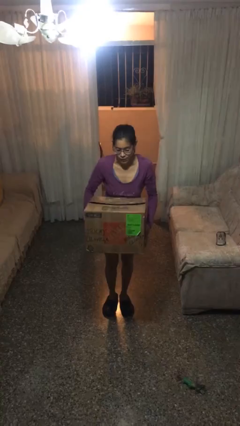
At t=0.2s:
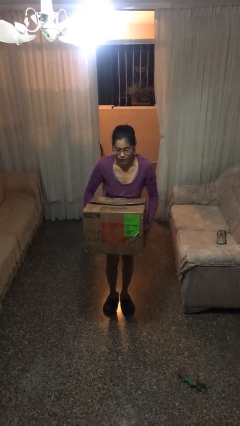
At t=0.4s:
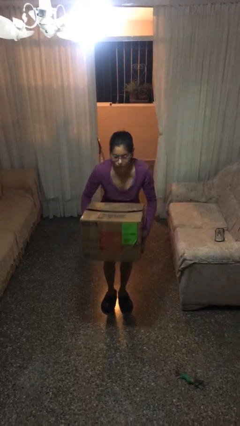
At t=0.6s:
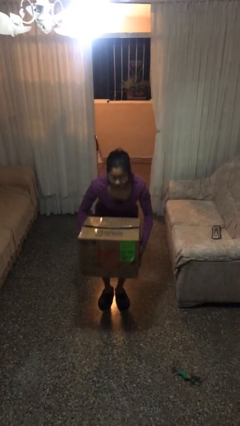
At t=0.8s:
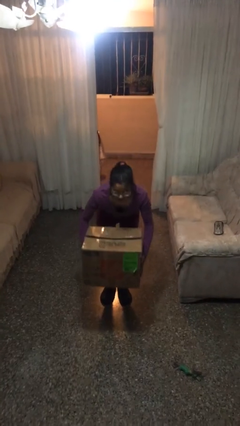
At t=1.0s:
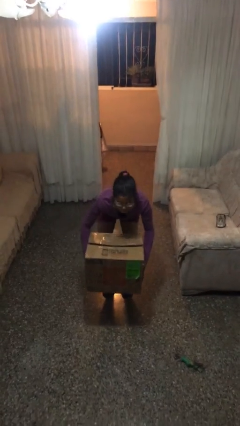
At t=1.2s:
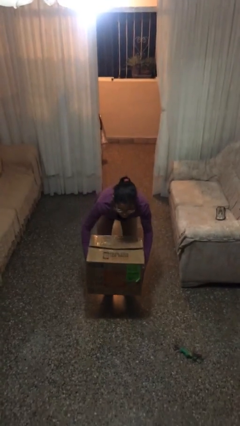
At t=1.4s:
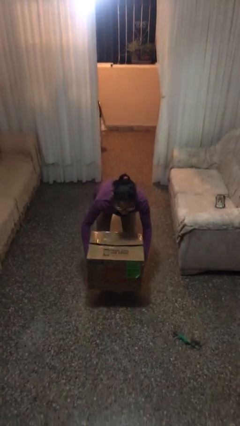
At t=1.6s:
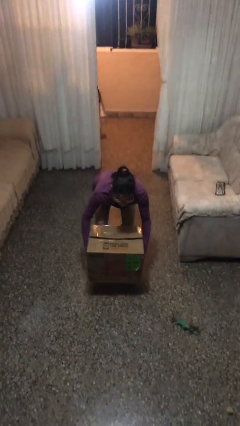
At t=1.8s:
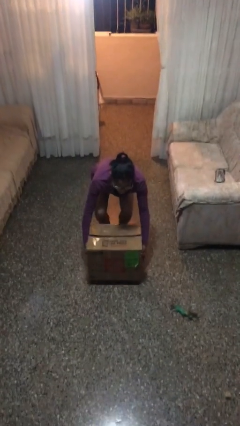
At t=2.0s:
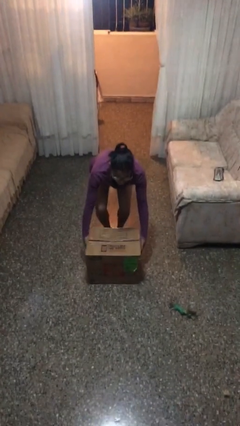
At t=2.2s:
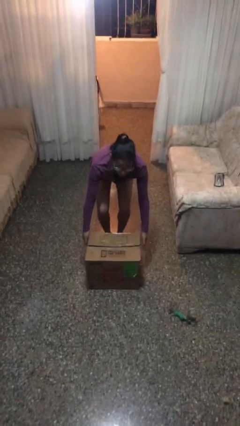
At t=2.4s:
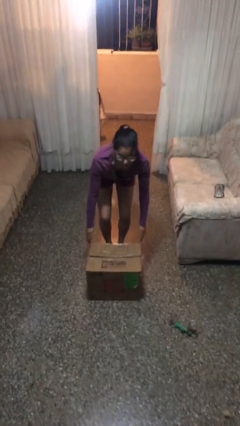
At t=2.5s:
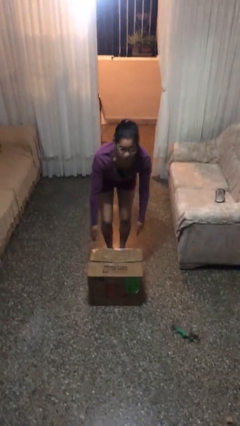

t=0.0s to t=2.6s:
person puts down object on floor

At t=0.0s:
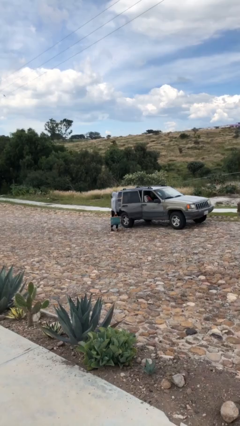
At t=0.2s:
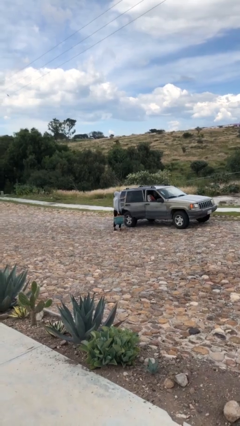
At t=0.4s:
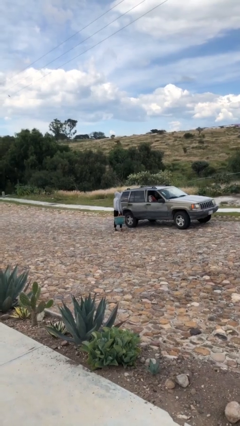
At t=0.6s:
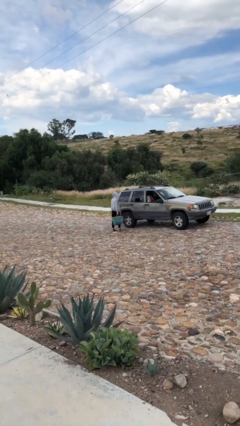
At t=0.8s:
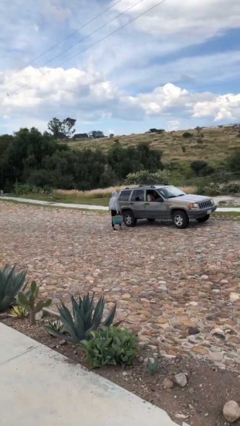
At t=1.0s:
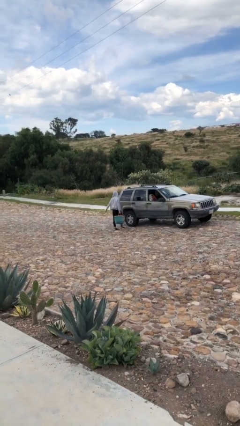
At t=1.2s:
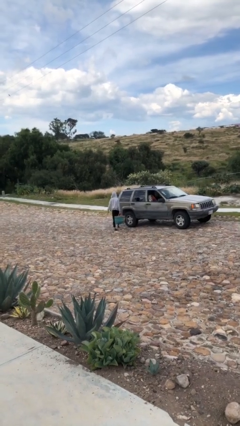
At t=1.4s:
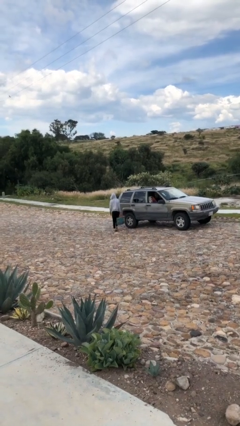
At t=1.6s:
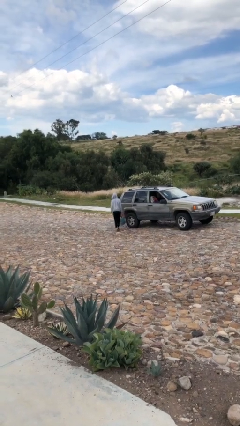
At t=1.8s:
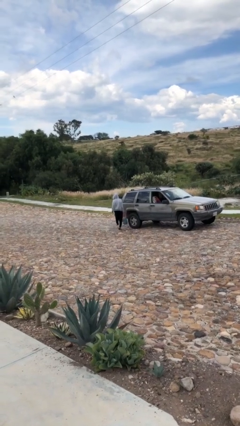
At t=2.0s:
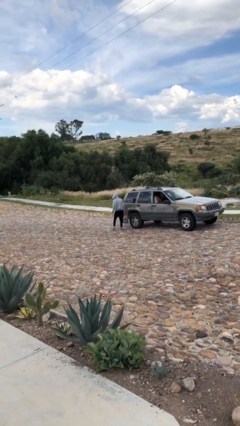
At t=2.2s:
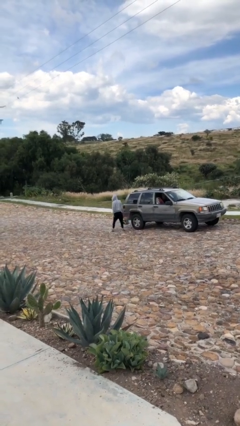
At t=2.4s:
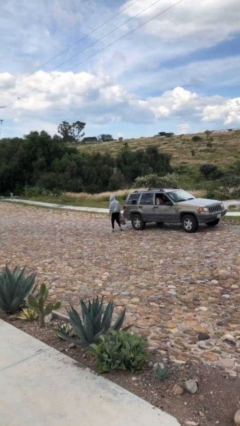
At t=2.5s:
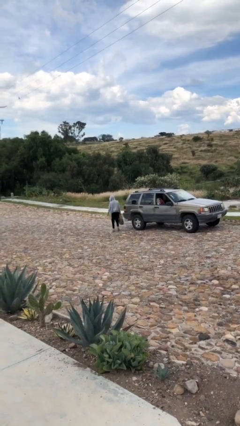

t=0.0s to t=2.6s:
person closes car door

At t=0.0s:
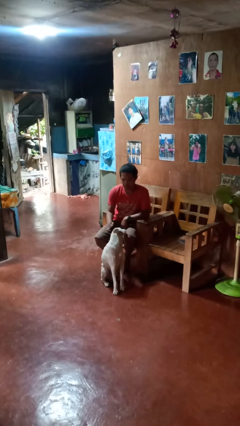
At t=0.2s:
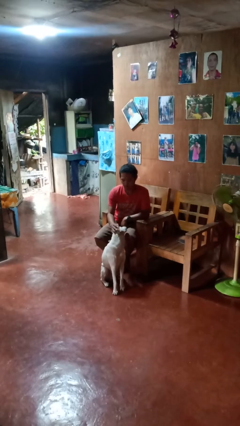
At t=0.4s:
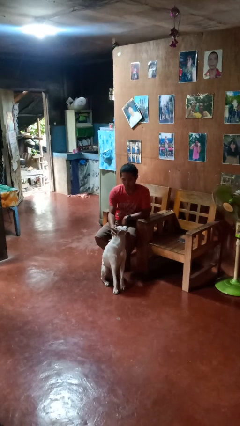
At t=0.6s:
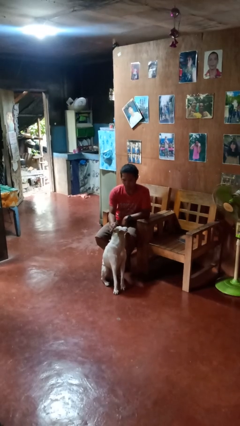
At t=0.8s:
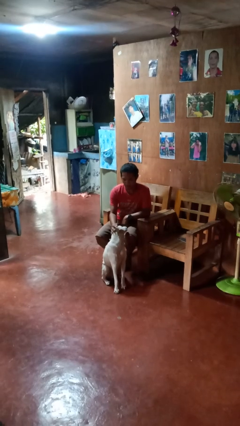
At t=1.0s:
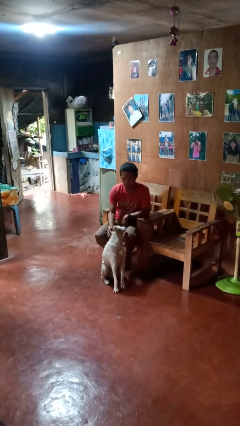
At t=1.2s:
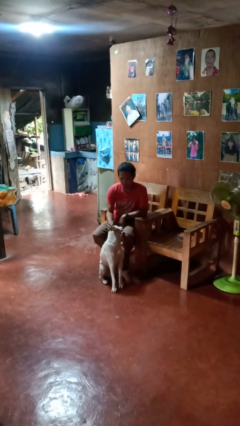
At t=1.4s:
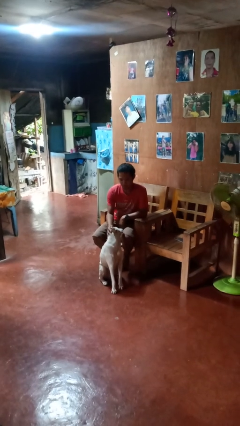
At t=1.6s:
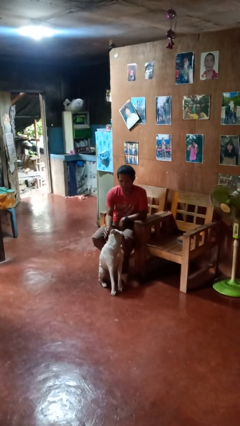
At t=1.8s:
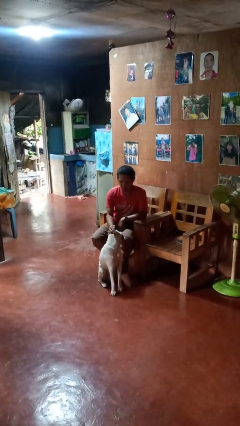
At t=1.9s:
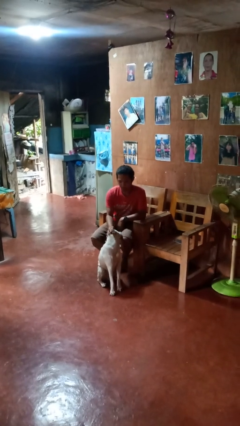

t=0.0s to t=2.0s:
person pets dog

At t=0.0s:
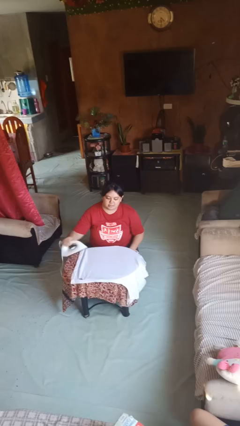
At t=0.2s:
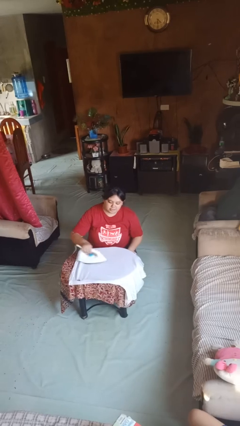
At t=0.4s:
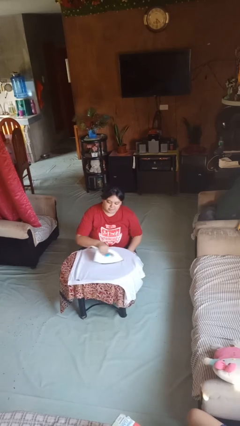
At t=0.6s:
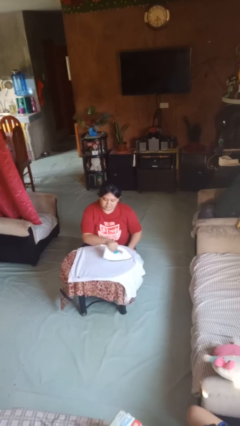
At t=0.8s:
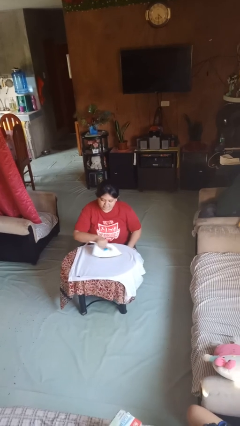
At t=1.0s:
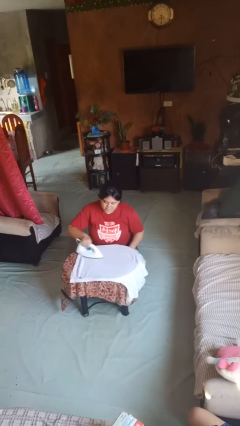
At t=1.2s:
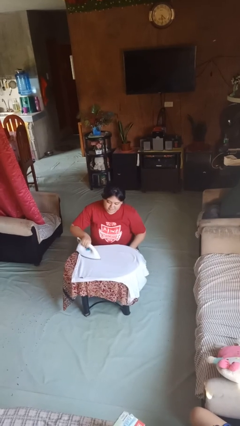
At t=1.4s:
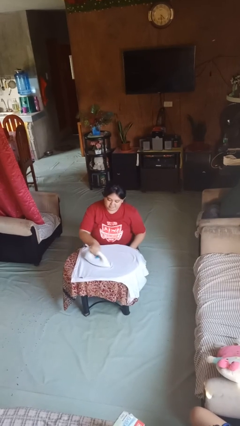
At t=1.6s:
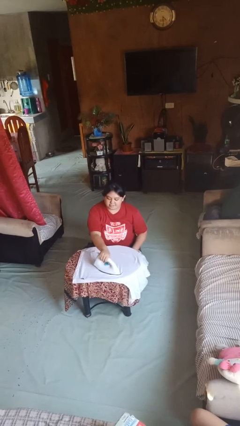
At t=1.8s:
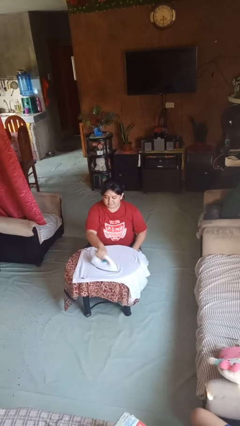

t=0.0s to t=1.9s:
person irons clothes

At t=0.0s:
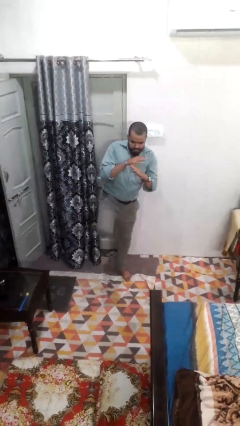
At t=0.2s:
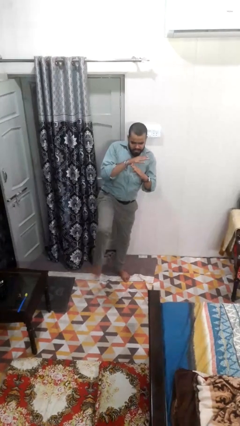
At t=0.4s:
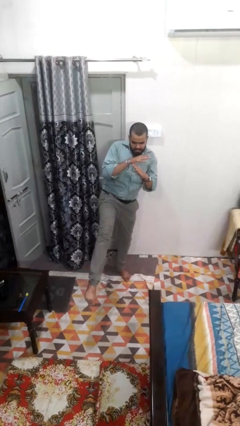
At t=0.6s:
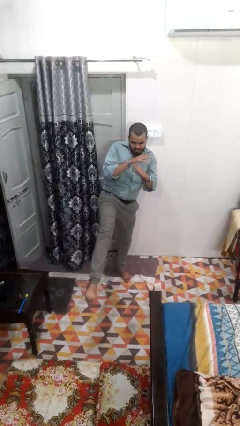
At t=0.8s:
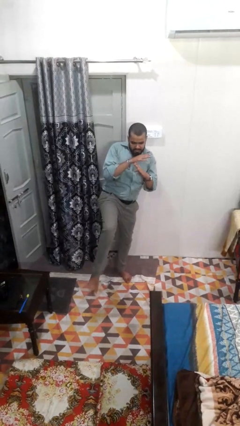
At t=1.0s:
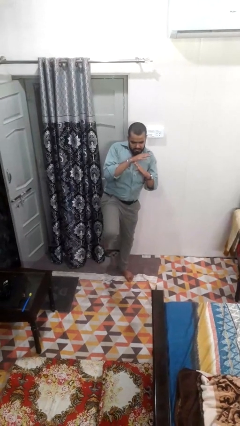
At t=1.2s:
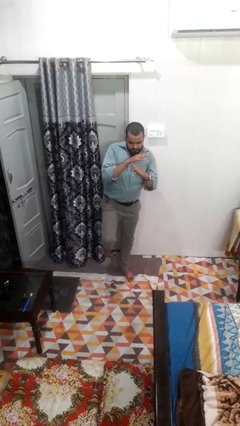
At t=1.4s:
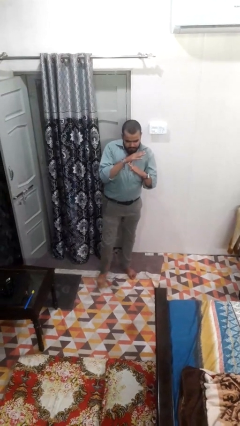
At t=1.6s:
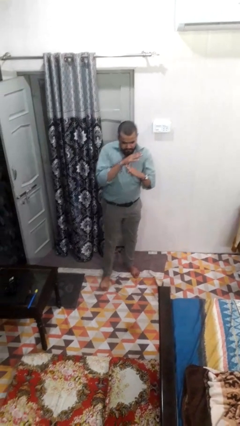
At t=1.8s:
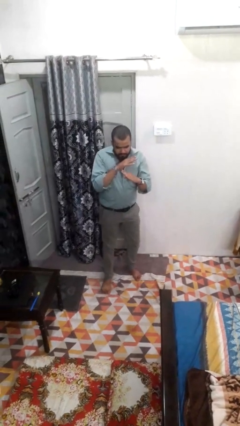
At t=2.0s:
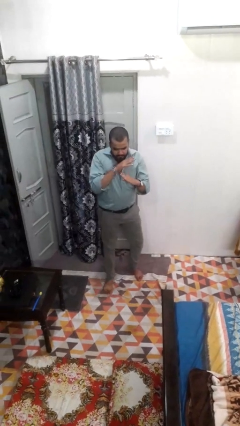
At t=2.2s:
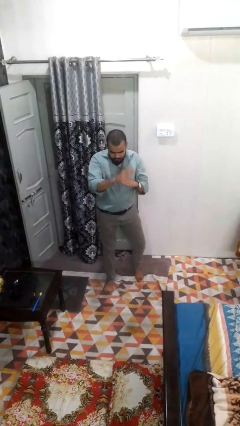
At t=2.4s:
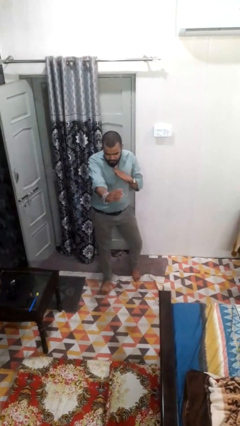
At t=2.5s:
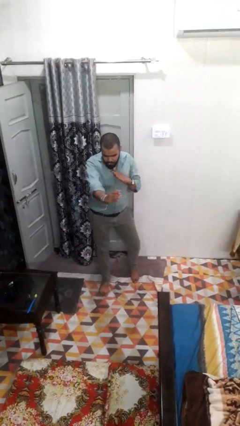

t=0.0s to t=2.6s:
person karate kicks

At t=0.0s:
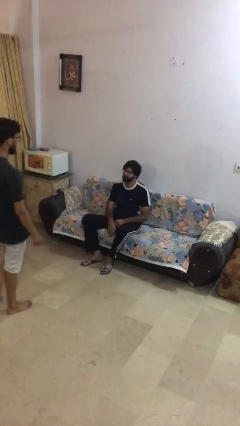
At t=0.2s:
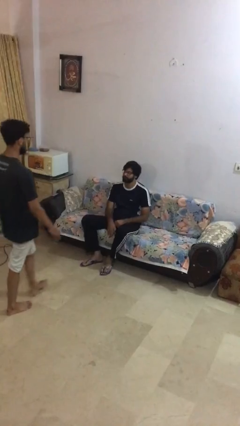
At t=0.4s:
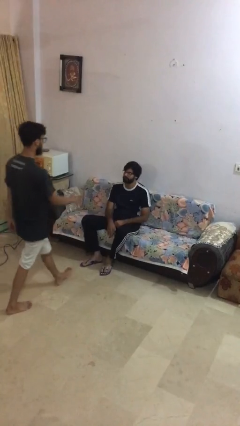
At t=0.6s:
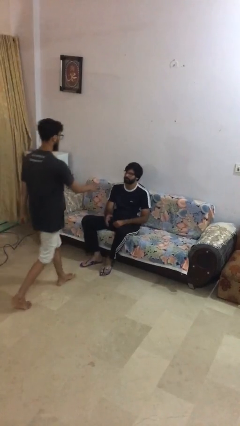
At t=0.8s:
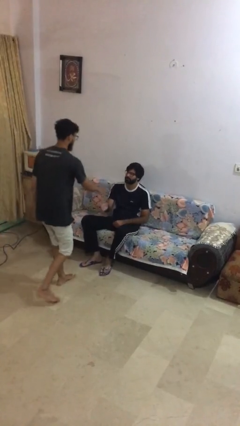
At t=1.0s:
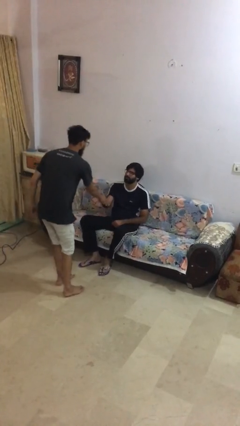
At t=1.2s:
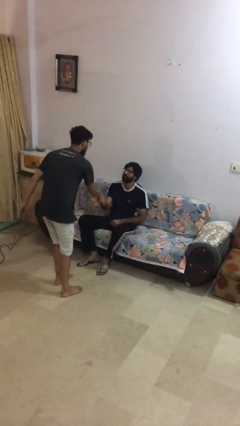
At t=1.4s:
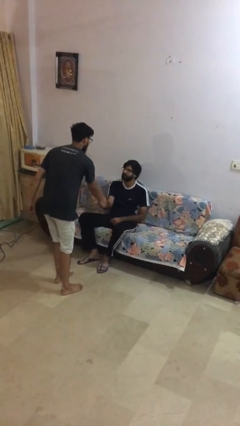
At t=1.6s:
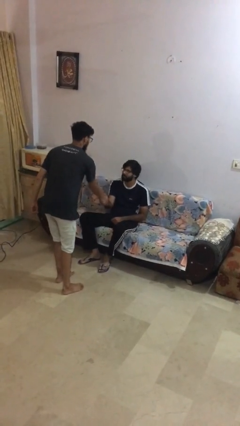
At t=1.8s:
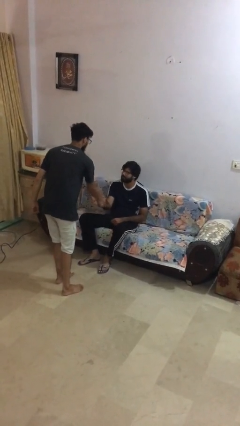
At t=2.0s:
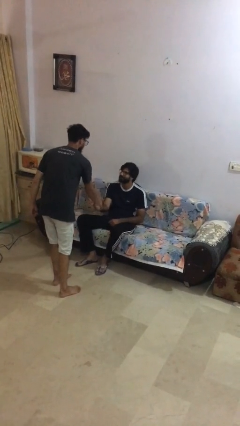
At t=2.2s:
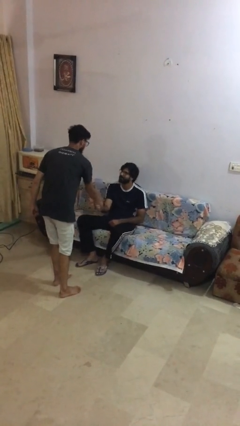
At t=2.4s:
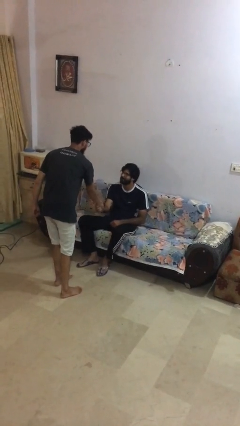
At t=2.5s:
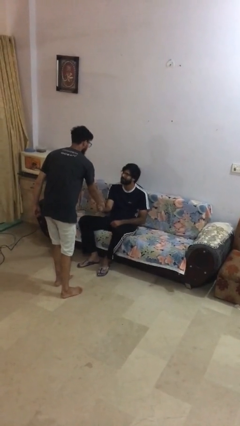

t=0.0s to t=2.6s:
person shakes hand

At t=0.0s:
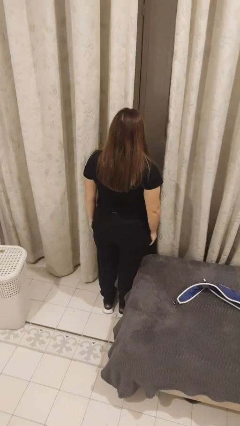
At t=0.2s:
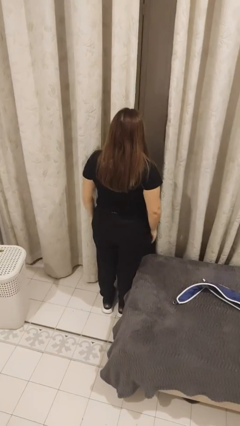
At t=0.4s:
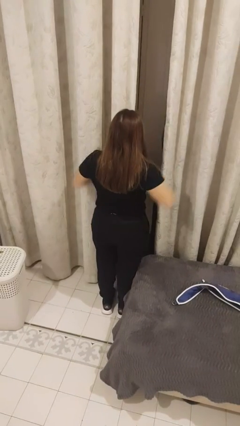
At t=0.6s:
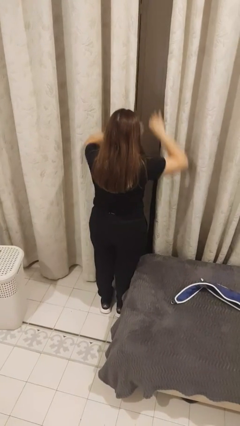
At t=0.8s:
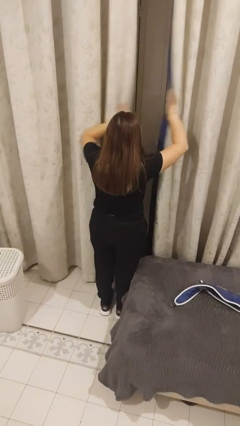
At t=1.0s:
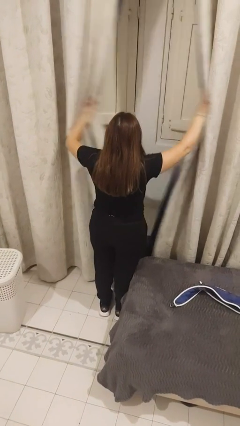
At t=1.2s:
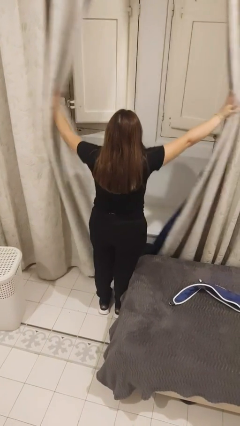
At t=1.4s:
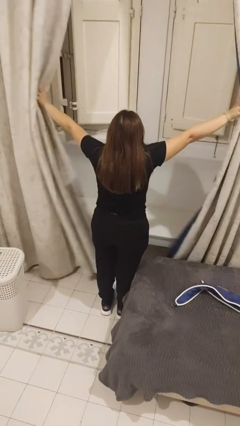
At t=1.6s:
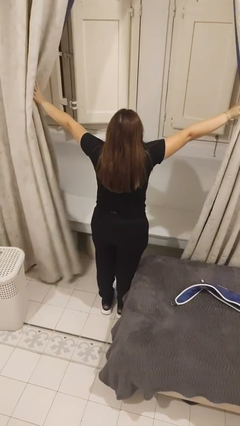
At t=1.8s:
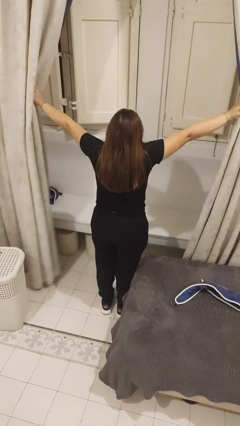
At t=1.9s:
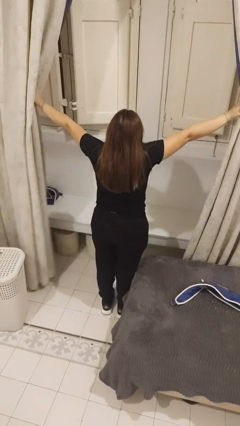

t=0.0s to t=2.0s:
person opens curtains

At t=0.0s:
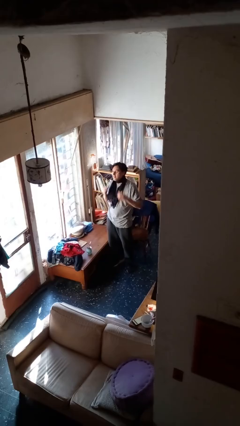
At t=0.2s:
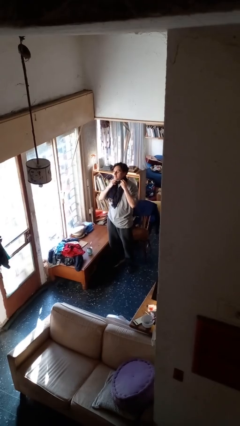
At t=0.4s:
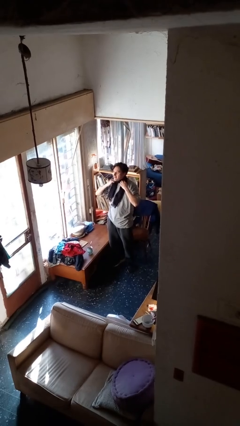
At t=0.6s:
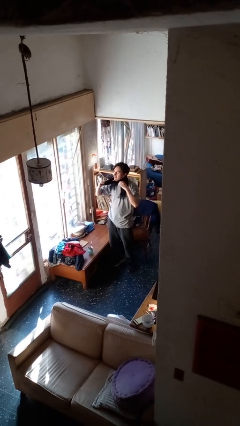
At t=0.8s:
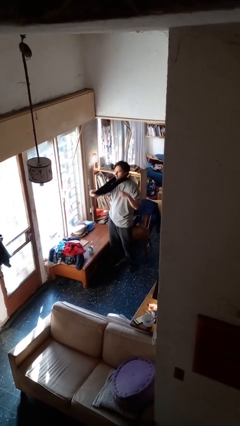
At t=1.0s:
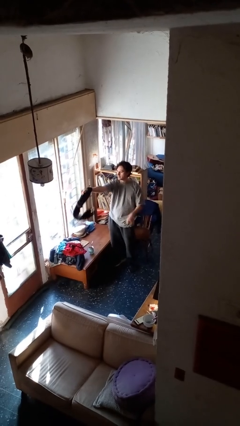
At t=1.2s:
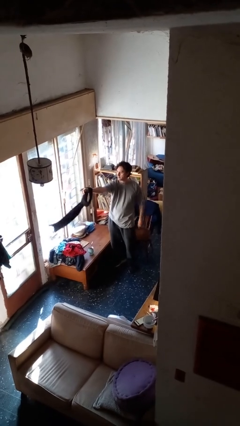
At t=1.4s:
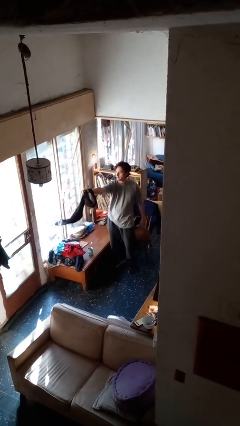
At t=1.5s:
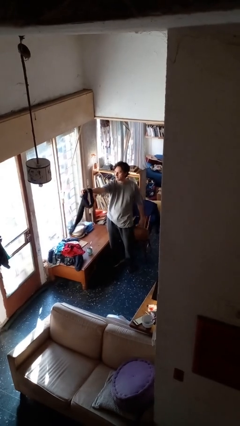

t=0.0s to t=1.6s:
person takes off scarf
